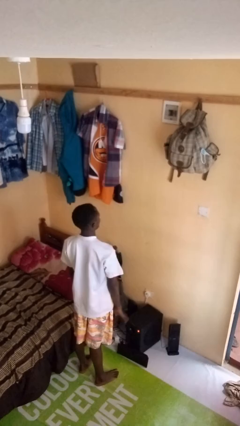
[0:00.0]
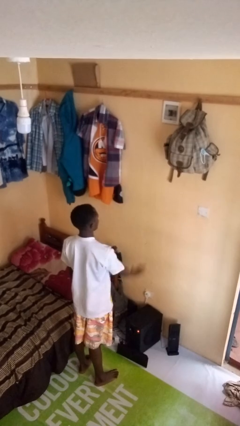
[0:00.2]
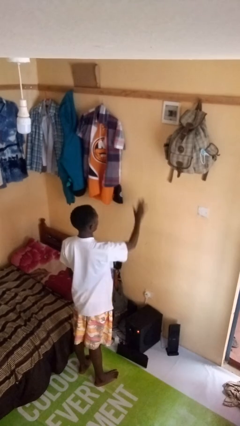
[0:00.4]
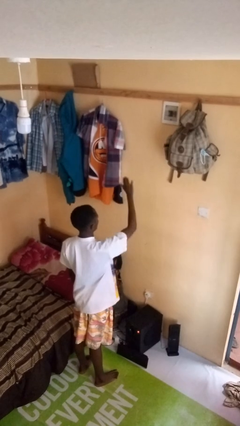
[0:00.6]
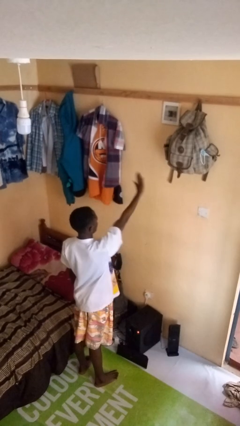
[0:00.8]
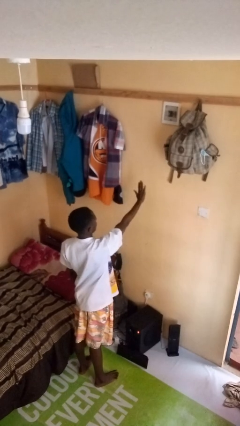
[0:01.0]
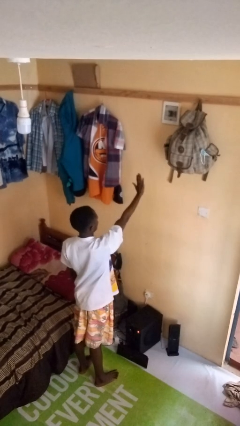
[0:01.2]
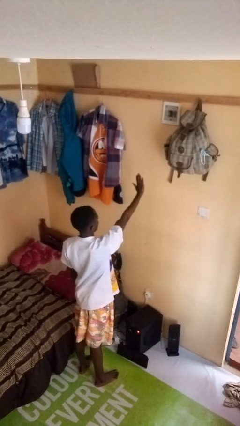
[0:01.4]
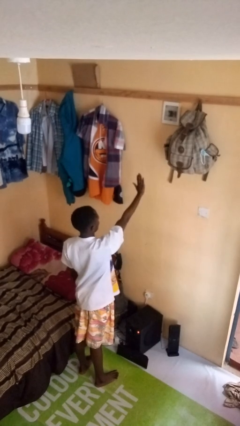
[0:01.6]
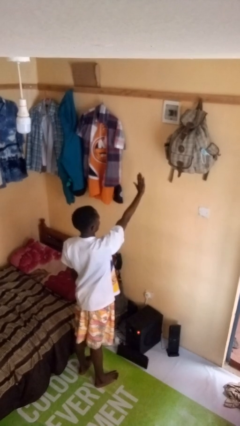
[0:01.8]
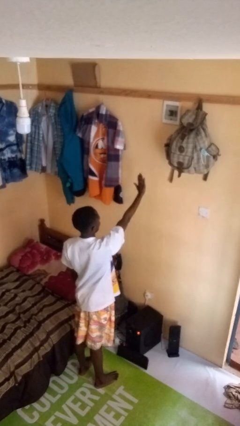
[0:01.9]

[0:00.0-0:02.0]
person gestures stop

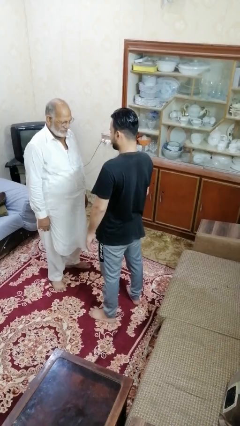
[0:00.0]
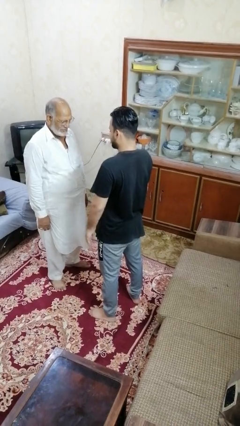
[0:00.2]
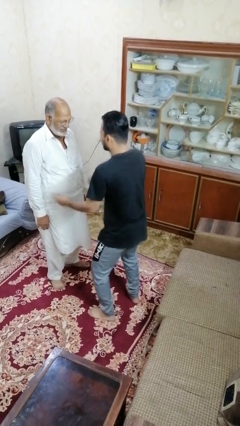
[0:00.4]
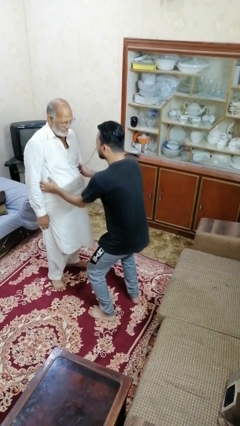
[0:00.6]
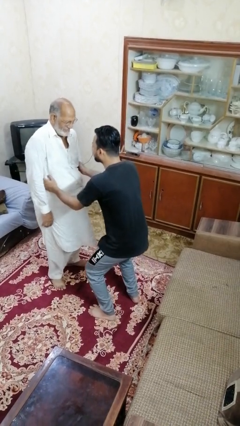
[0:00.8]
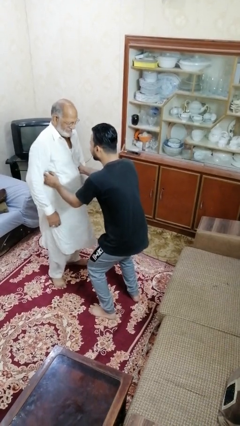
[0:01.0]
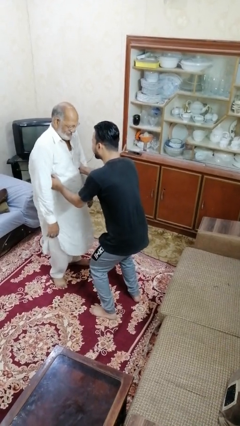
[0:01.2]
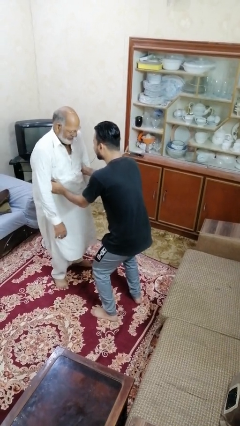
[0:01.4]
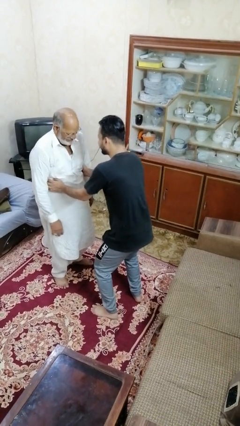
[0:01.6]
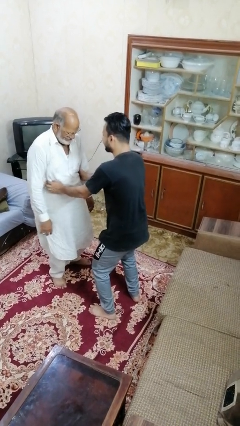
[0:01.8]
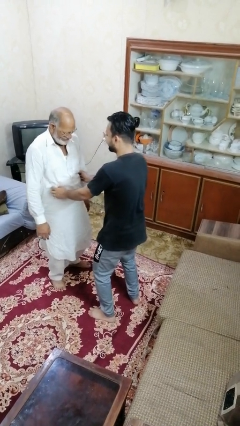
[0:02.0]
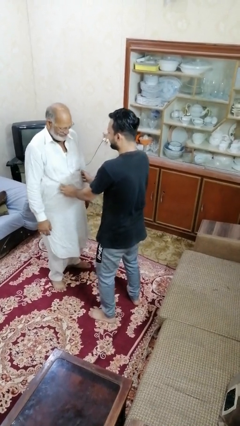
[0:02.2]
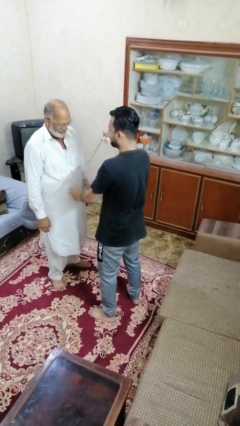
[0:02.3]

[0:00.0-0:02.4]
person tickles person

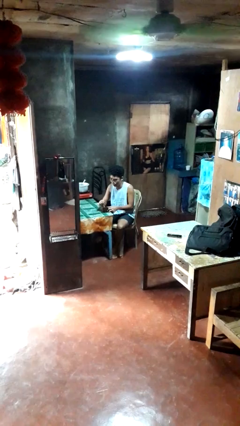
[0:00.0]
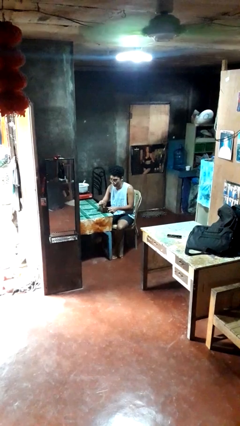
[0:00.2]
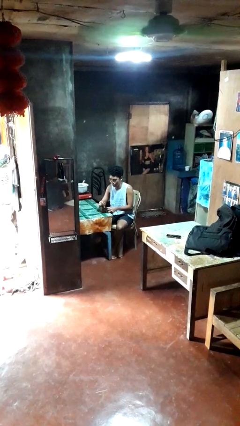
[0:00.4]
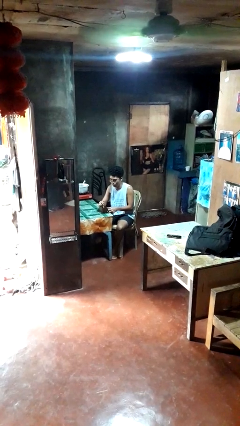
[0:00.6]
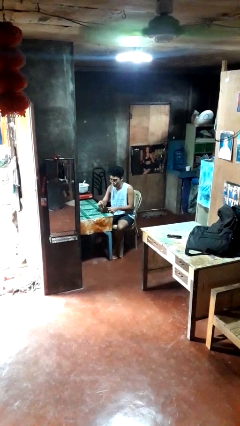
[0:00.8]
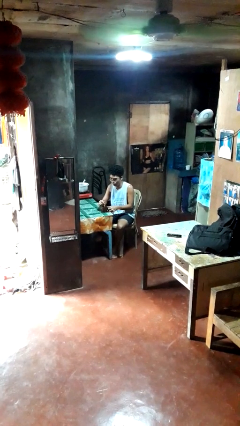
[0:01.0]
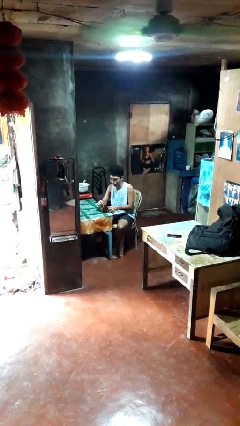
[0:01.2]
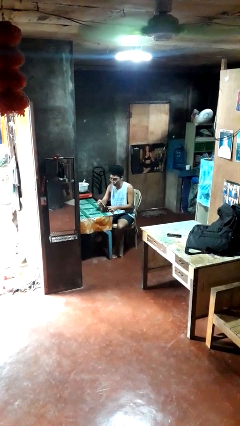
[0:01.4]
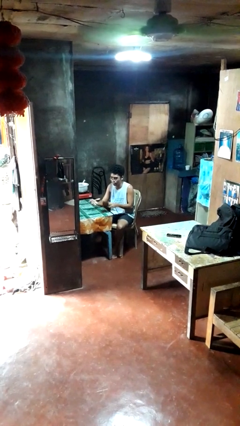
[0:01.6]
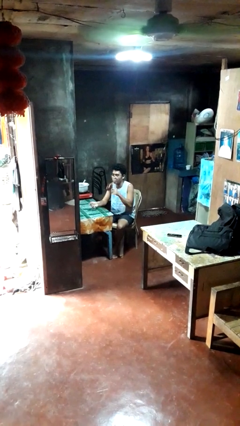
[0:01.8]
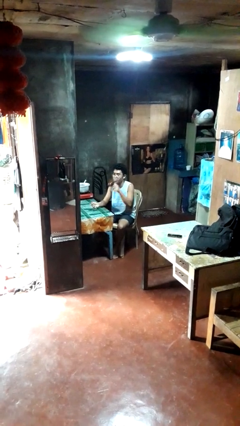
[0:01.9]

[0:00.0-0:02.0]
person stirs mug

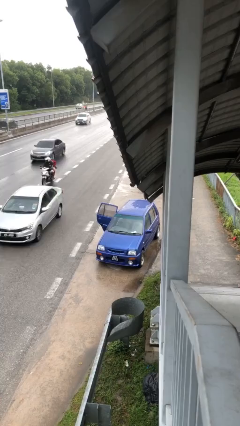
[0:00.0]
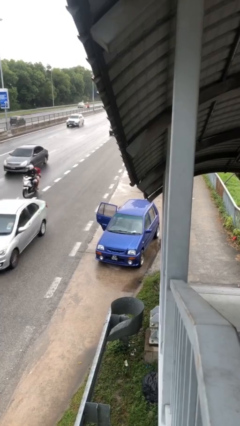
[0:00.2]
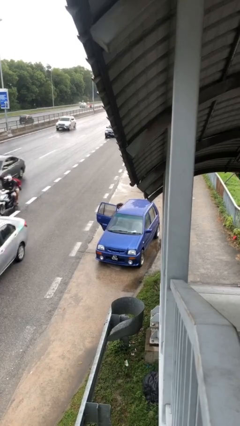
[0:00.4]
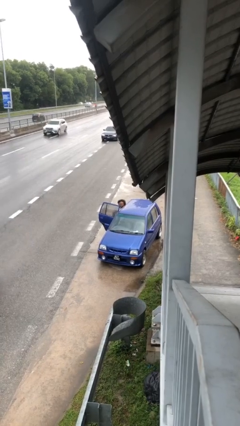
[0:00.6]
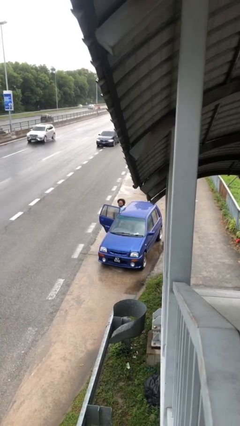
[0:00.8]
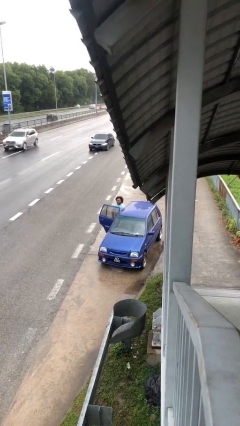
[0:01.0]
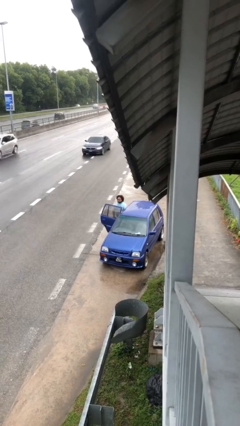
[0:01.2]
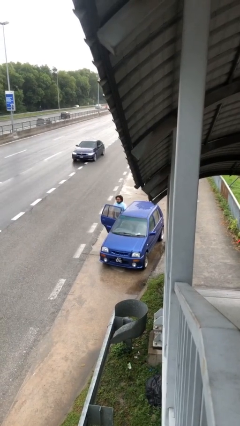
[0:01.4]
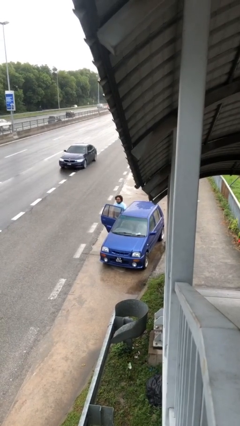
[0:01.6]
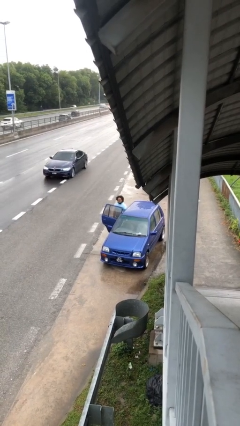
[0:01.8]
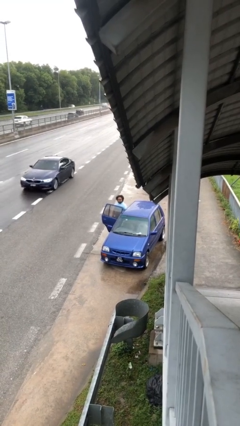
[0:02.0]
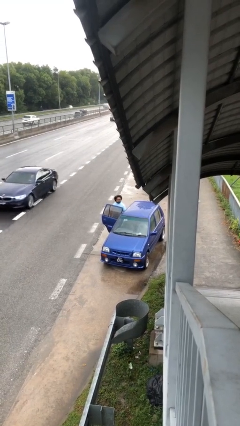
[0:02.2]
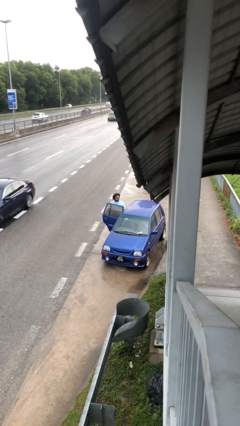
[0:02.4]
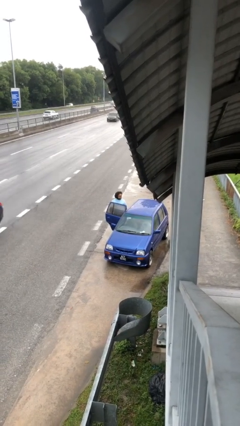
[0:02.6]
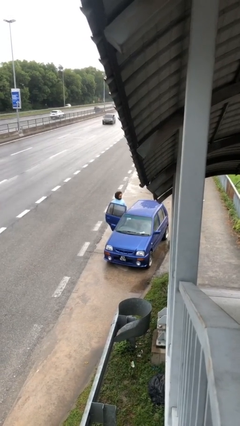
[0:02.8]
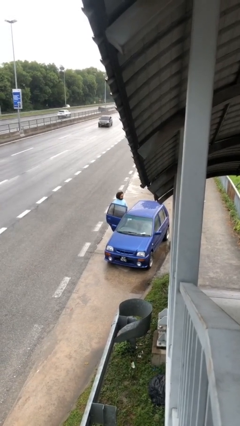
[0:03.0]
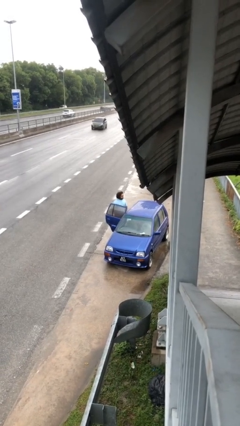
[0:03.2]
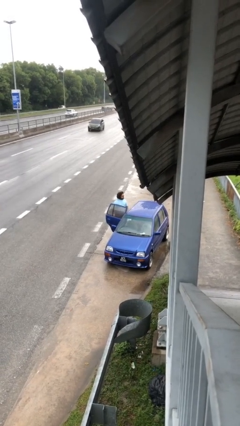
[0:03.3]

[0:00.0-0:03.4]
person exits car

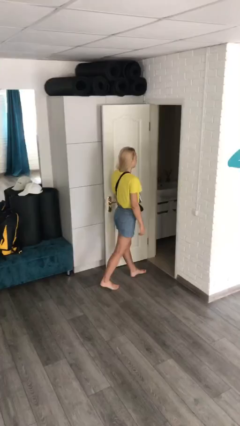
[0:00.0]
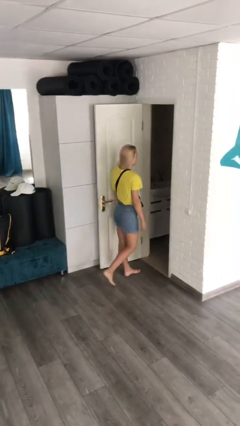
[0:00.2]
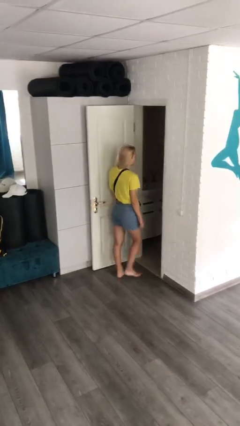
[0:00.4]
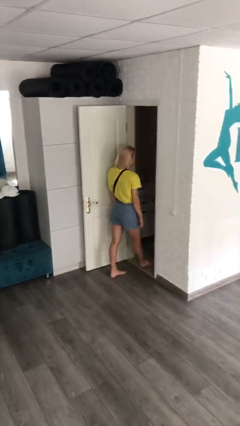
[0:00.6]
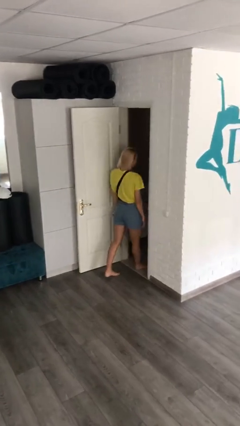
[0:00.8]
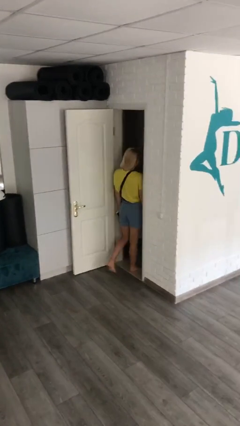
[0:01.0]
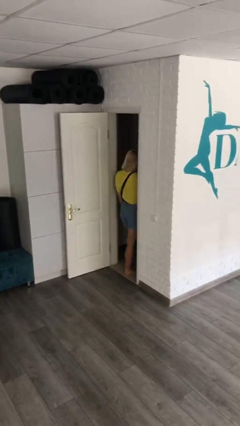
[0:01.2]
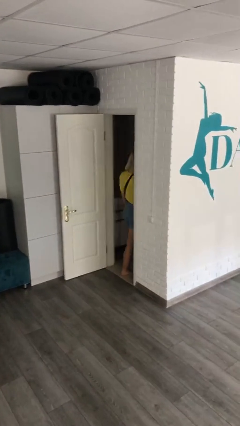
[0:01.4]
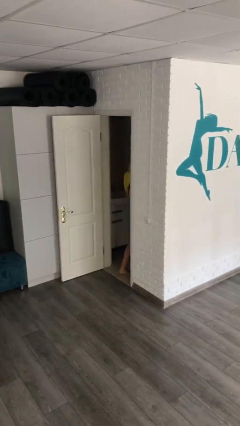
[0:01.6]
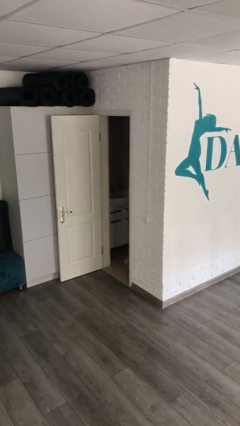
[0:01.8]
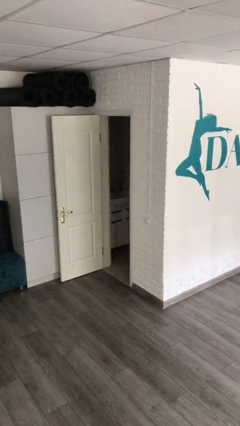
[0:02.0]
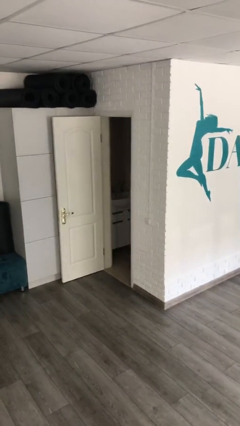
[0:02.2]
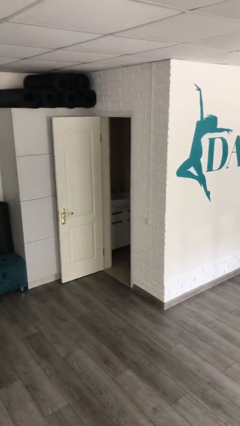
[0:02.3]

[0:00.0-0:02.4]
person exits scene through structure

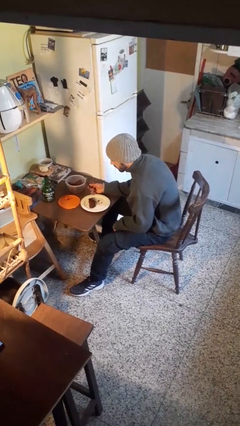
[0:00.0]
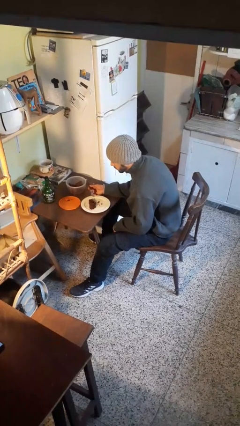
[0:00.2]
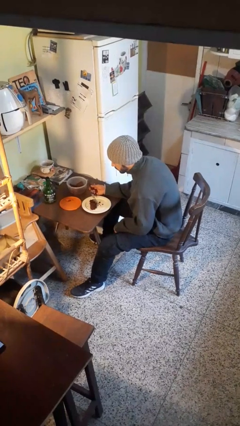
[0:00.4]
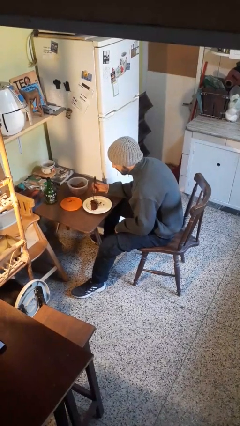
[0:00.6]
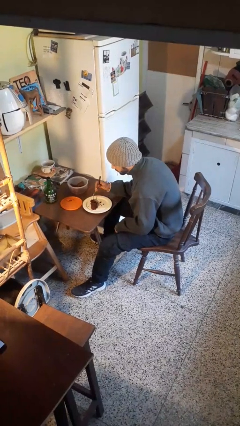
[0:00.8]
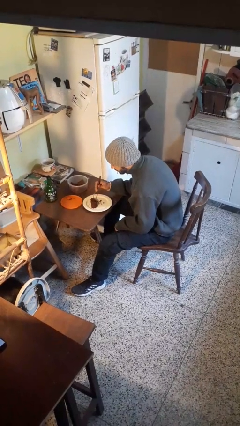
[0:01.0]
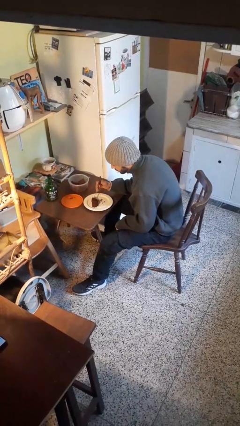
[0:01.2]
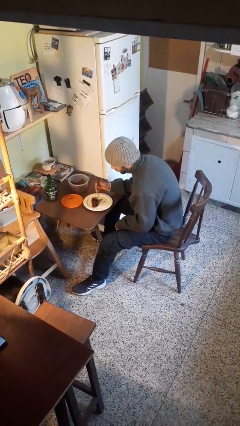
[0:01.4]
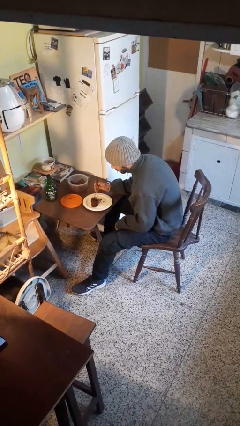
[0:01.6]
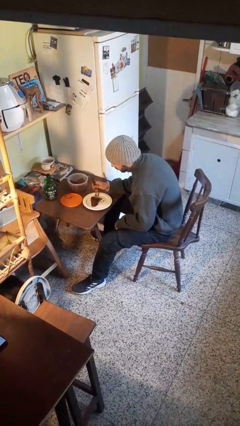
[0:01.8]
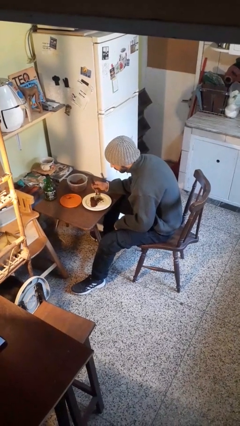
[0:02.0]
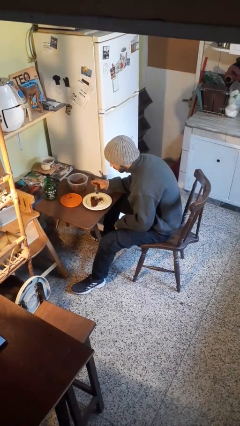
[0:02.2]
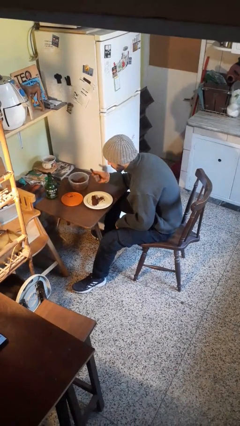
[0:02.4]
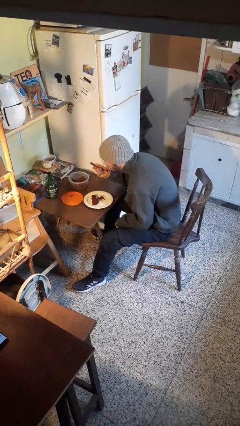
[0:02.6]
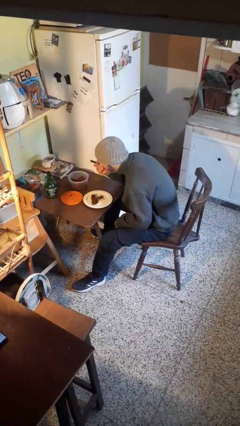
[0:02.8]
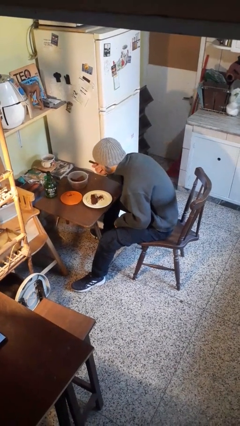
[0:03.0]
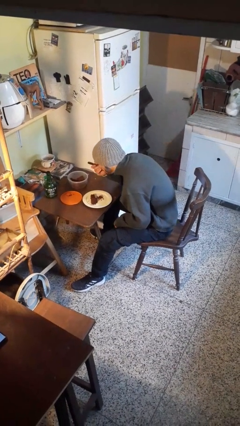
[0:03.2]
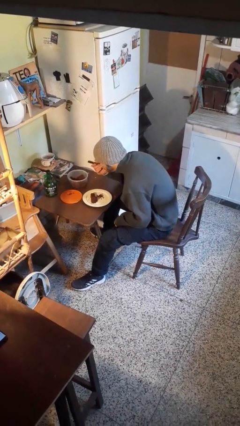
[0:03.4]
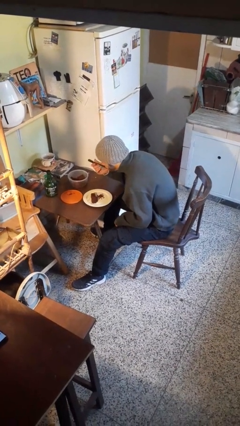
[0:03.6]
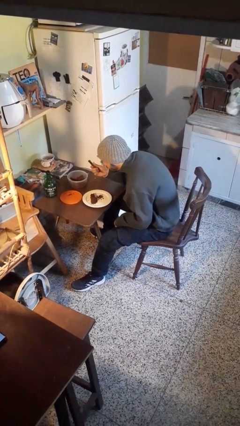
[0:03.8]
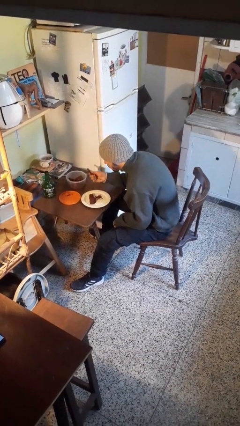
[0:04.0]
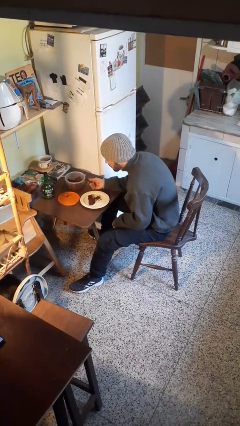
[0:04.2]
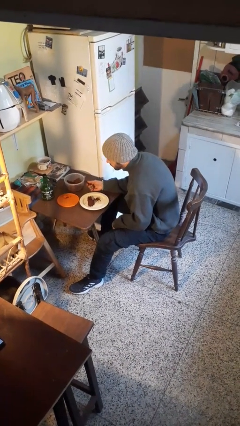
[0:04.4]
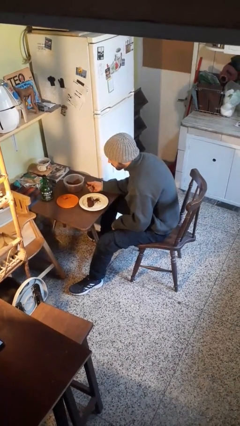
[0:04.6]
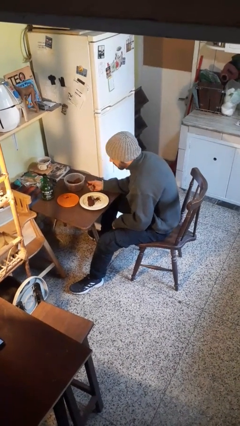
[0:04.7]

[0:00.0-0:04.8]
person eats with utensil

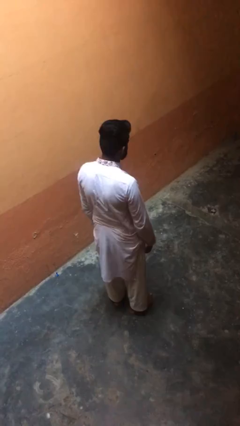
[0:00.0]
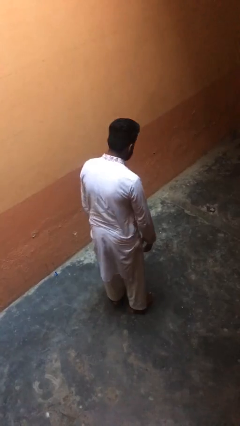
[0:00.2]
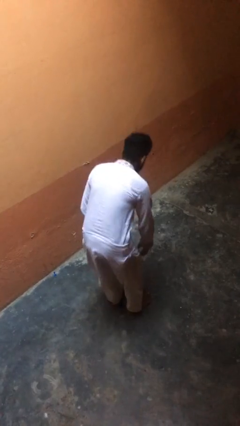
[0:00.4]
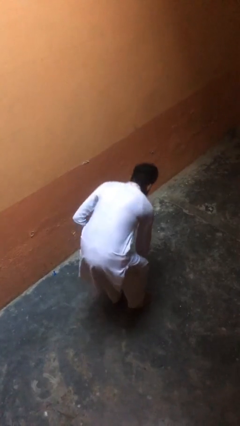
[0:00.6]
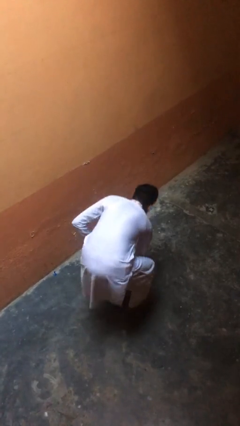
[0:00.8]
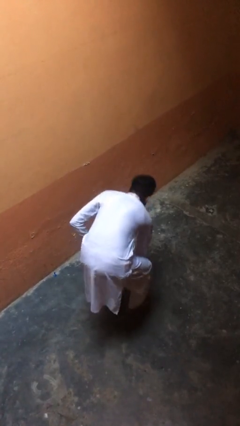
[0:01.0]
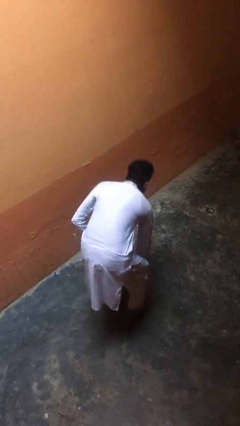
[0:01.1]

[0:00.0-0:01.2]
person picks up object from floor
